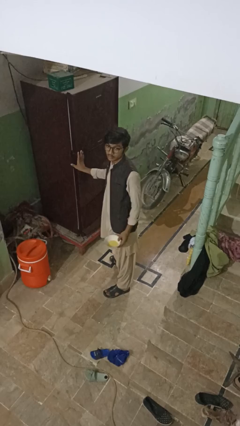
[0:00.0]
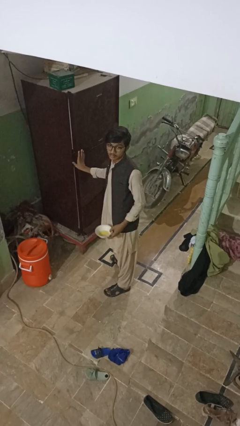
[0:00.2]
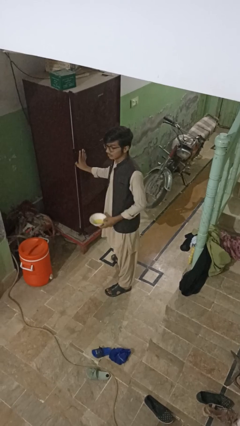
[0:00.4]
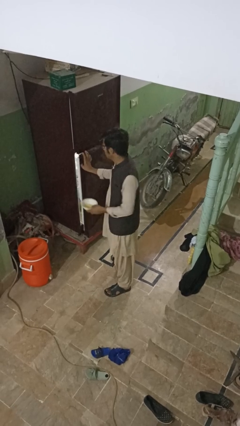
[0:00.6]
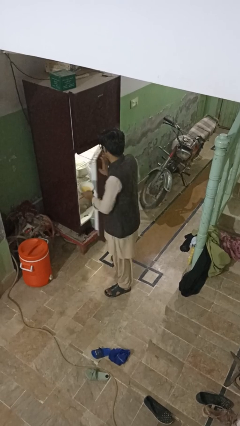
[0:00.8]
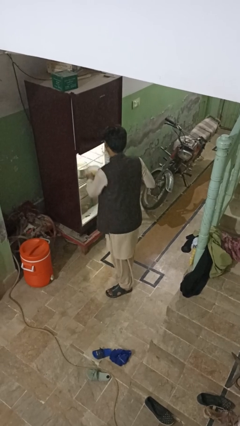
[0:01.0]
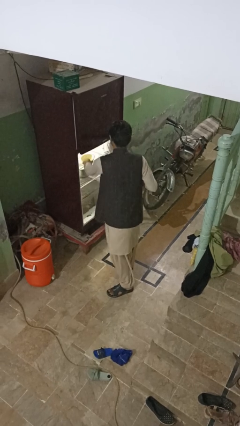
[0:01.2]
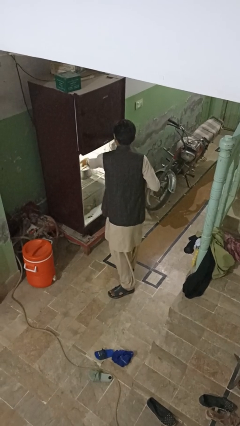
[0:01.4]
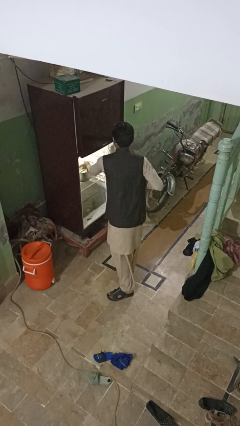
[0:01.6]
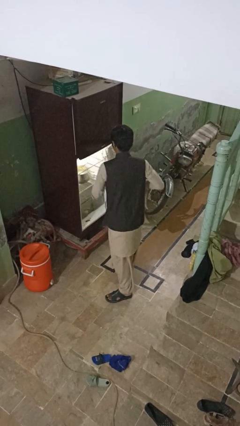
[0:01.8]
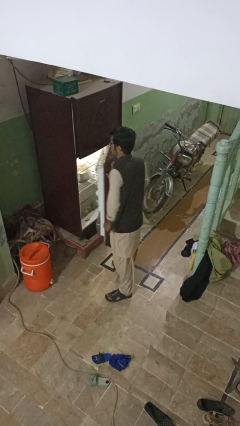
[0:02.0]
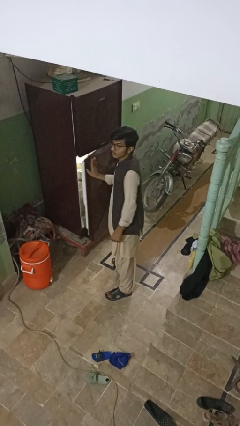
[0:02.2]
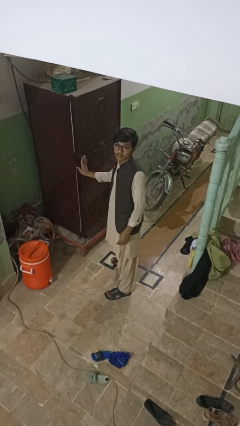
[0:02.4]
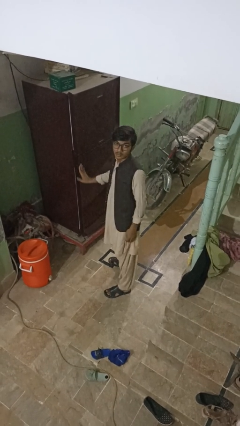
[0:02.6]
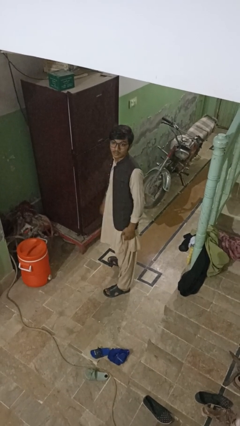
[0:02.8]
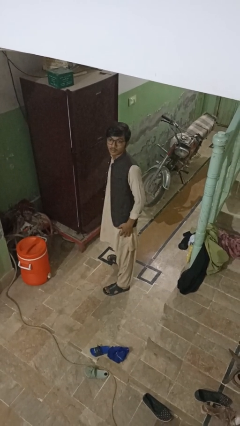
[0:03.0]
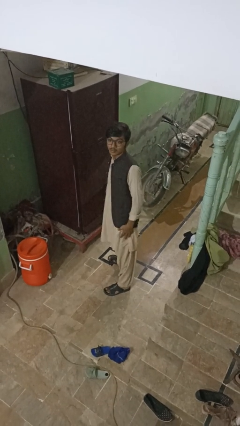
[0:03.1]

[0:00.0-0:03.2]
person puts object into refrigerator

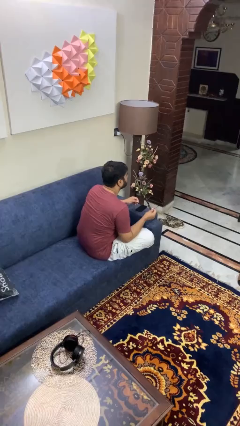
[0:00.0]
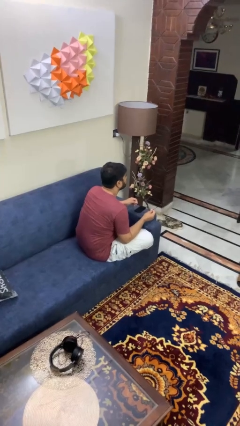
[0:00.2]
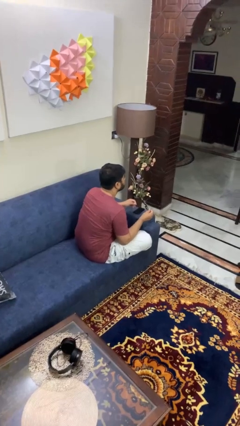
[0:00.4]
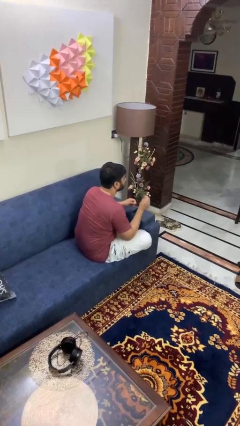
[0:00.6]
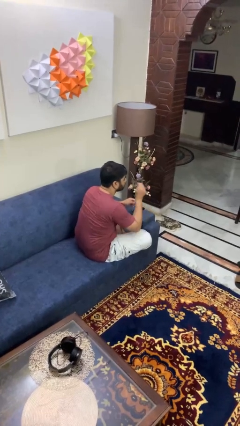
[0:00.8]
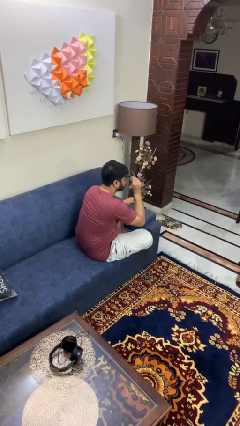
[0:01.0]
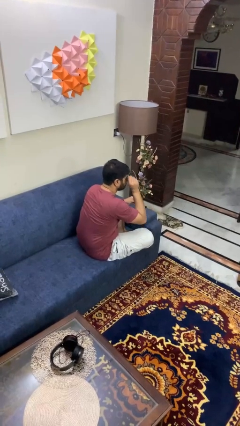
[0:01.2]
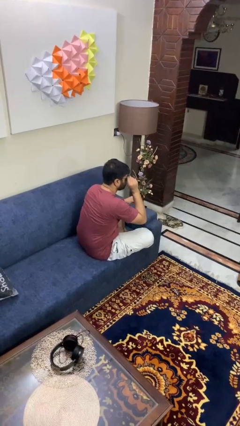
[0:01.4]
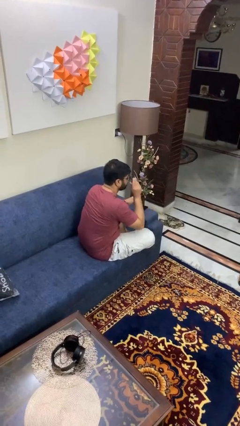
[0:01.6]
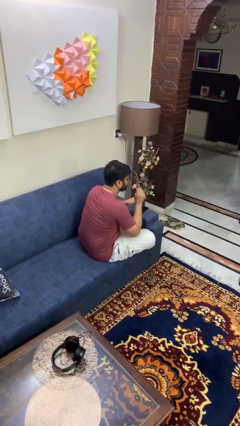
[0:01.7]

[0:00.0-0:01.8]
person puts on glasses

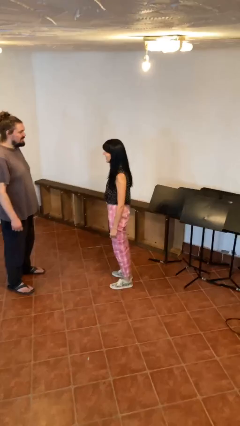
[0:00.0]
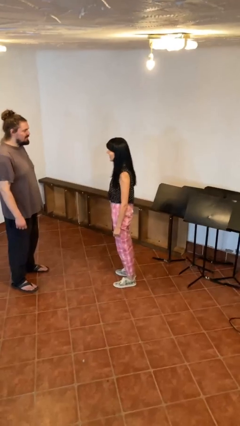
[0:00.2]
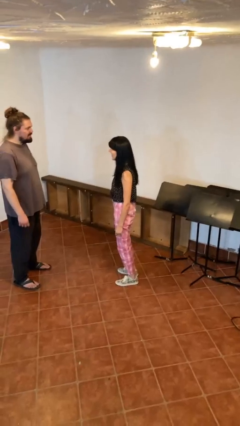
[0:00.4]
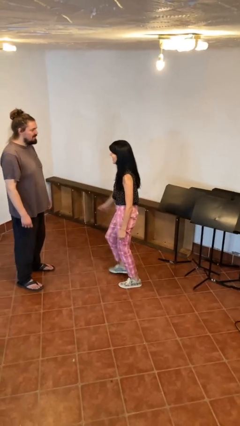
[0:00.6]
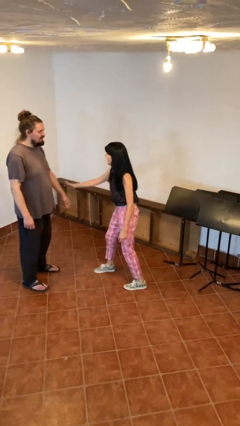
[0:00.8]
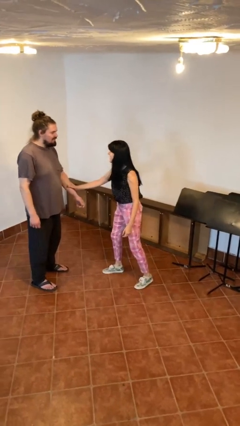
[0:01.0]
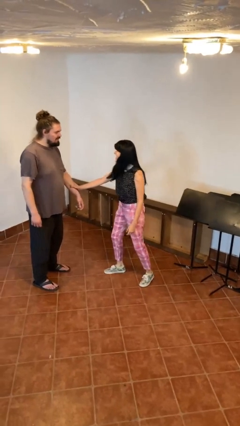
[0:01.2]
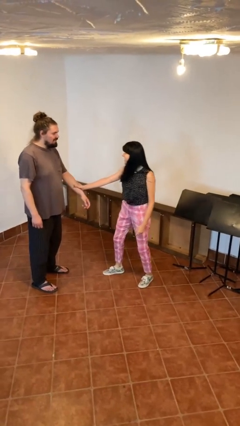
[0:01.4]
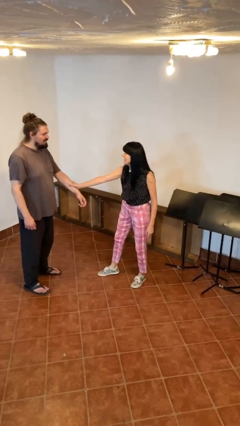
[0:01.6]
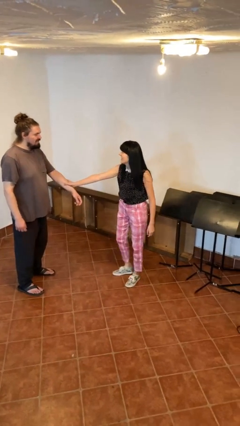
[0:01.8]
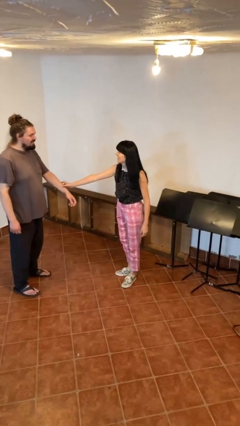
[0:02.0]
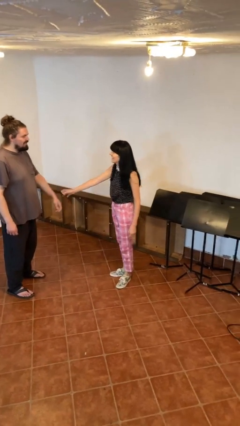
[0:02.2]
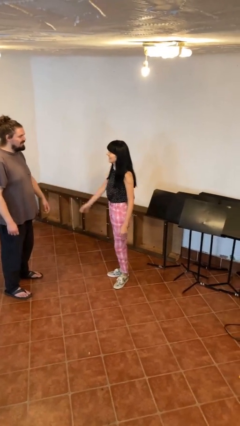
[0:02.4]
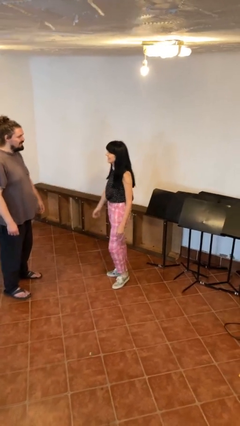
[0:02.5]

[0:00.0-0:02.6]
person grabs person by forearm

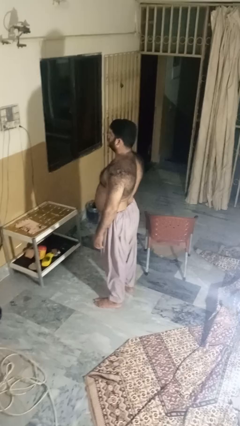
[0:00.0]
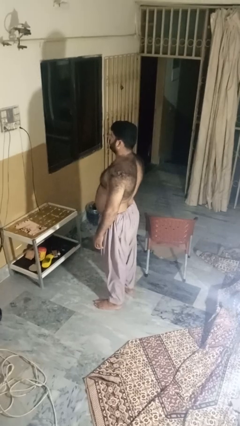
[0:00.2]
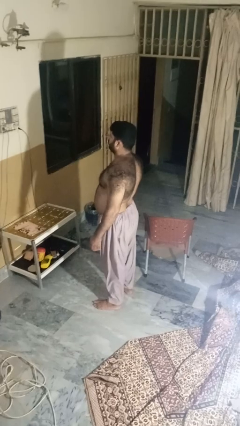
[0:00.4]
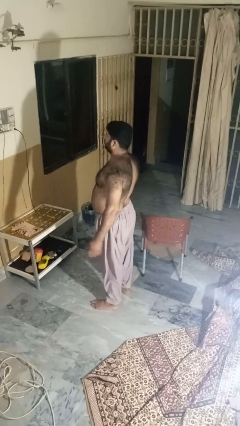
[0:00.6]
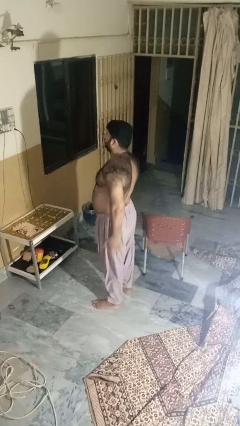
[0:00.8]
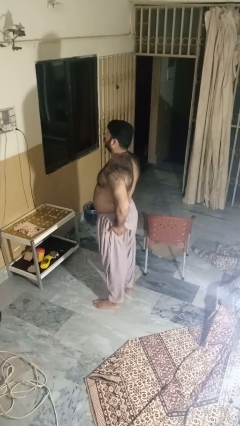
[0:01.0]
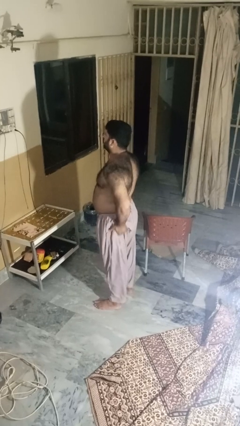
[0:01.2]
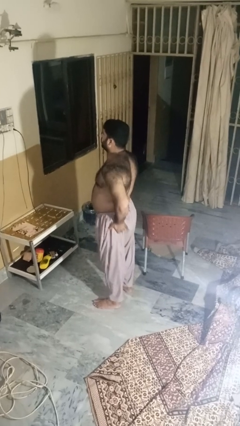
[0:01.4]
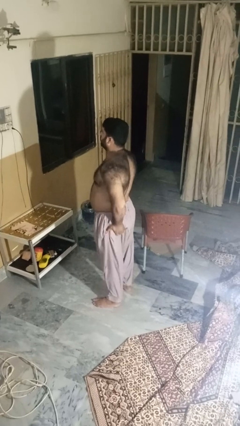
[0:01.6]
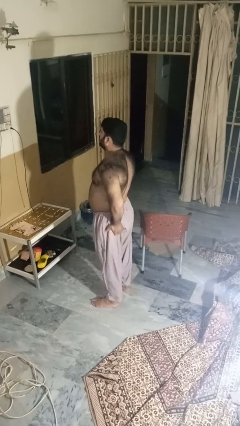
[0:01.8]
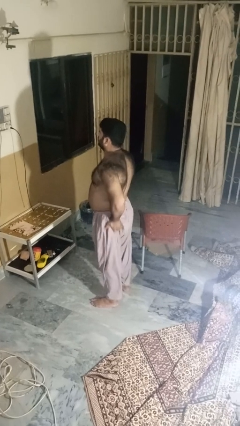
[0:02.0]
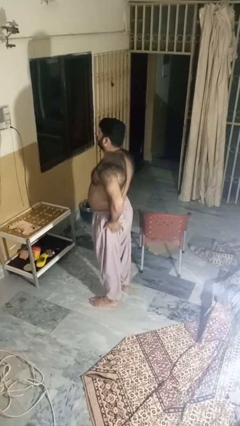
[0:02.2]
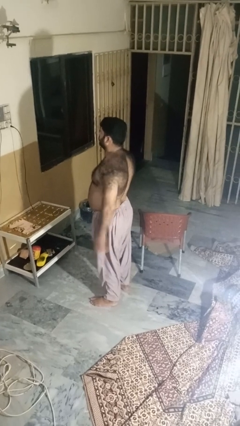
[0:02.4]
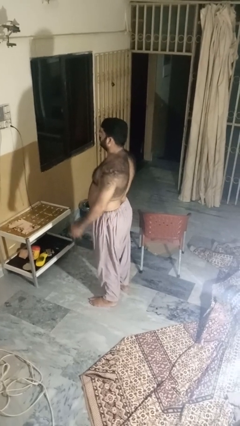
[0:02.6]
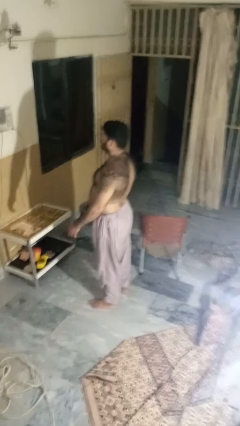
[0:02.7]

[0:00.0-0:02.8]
person wiggles hips

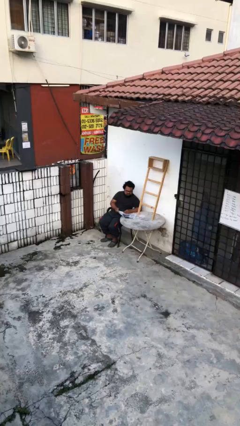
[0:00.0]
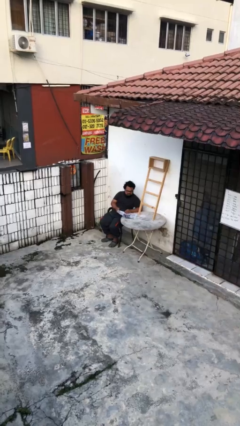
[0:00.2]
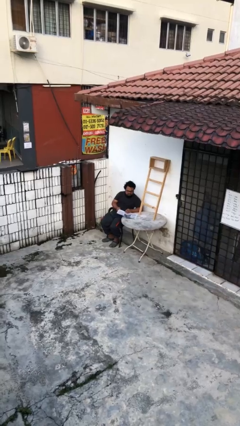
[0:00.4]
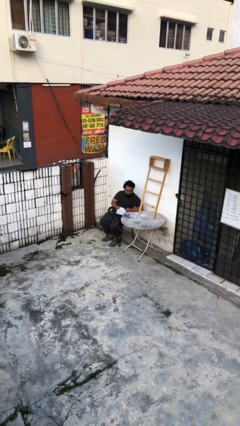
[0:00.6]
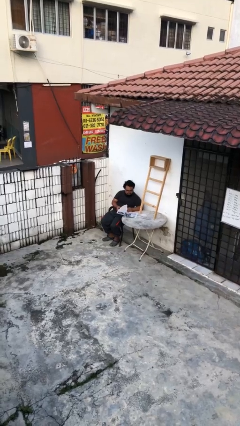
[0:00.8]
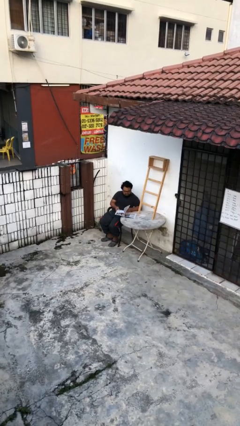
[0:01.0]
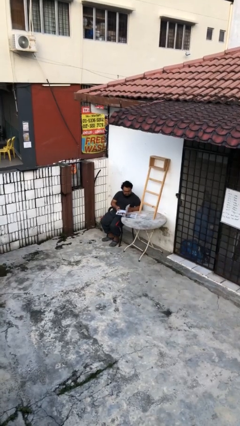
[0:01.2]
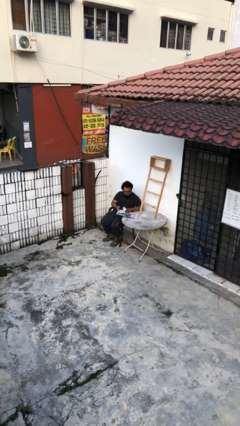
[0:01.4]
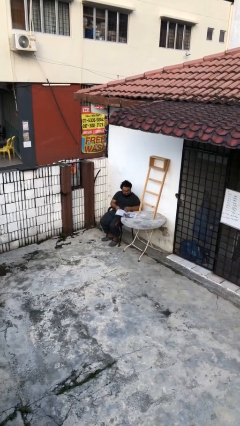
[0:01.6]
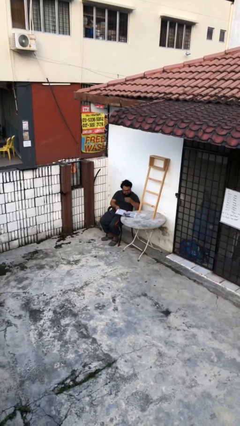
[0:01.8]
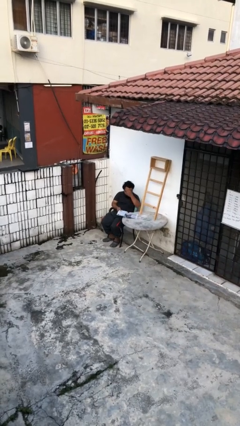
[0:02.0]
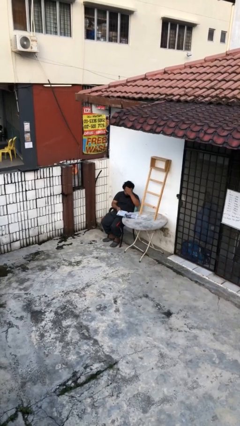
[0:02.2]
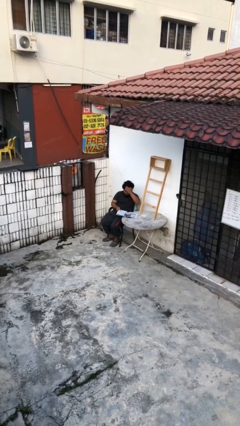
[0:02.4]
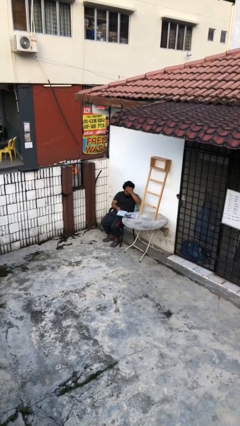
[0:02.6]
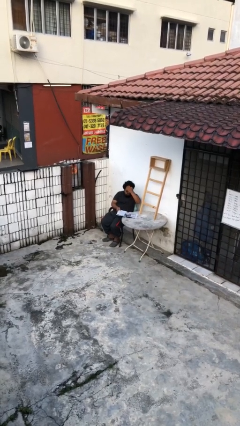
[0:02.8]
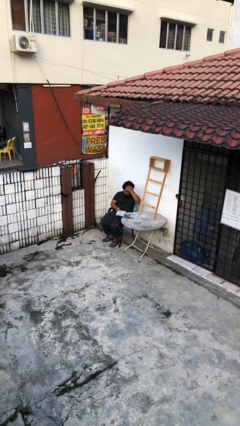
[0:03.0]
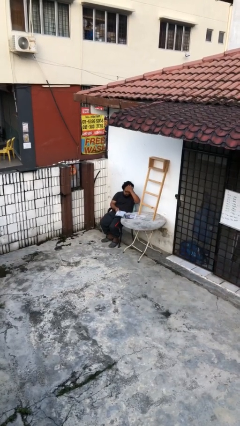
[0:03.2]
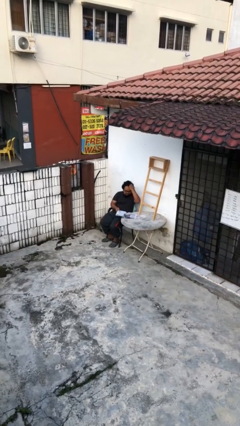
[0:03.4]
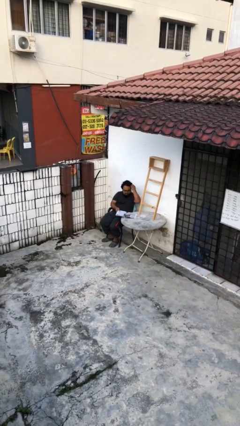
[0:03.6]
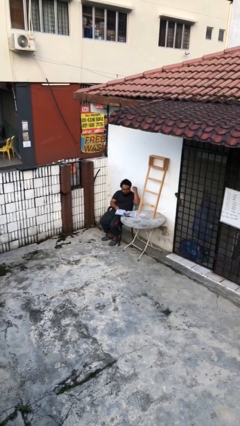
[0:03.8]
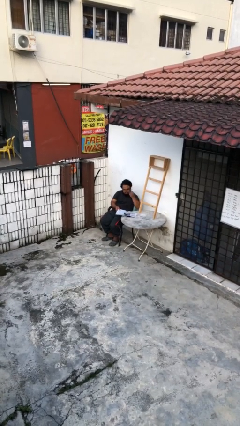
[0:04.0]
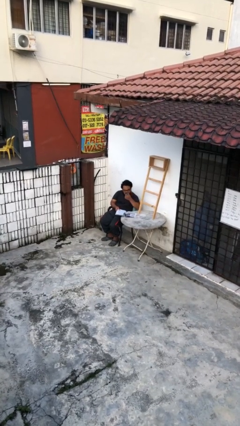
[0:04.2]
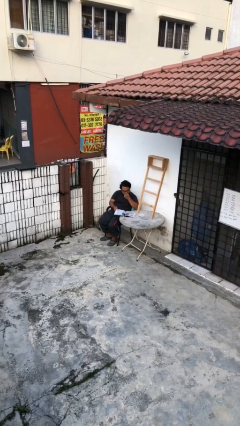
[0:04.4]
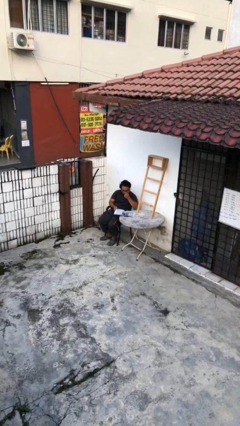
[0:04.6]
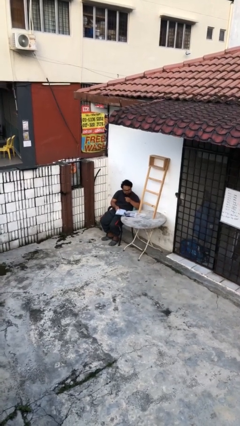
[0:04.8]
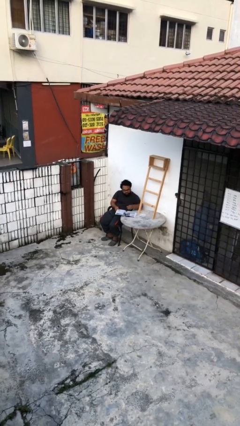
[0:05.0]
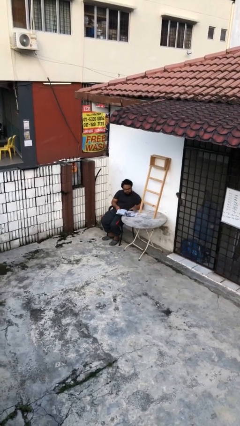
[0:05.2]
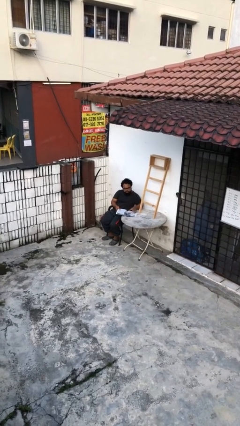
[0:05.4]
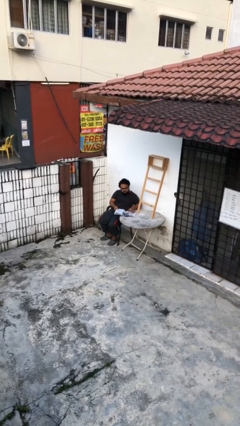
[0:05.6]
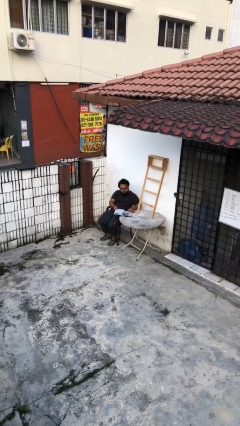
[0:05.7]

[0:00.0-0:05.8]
person reads document

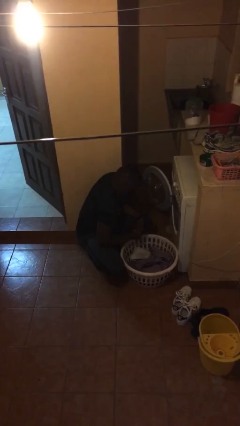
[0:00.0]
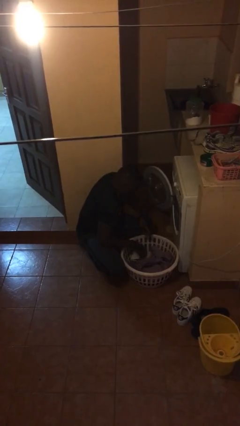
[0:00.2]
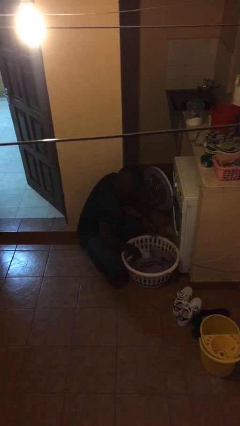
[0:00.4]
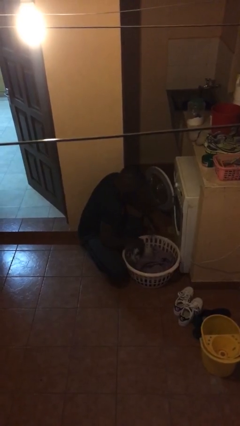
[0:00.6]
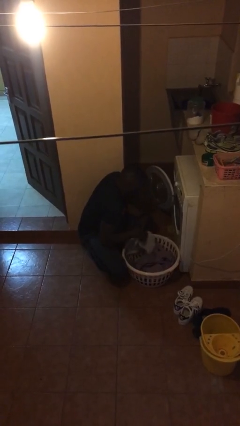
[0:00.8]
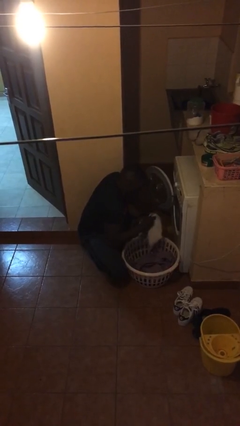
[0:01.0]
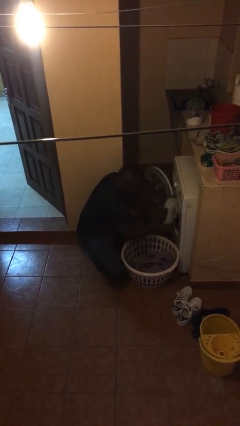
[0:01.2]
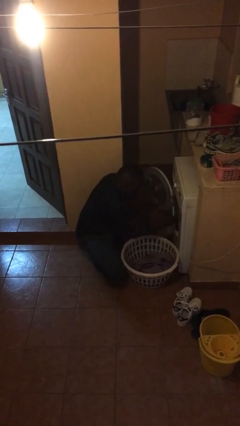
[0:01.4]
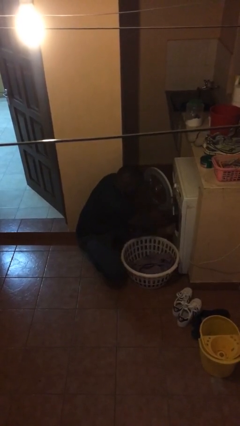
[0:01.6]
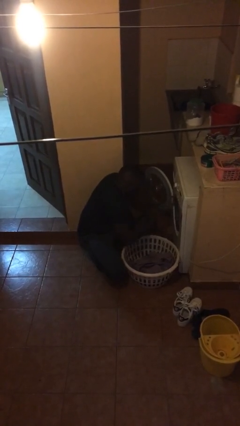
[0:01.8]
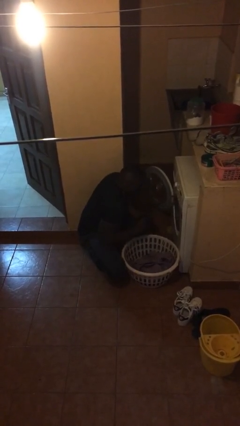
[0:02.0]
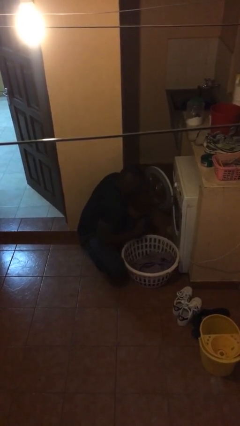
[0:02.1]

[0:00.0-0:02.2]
person loads clotheswasher
